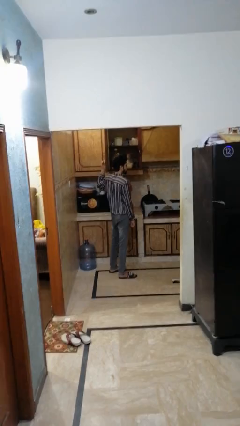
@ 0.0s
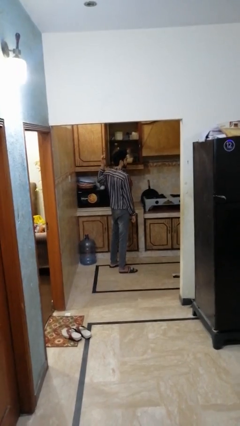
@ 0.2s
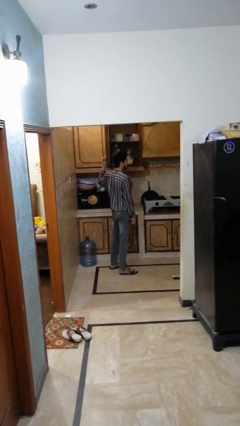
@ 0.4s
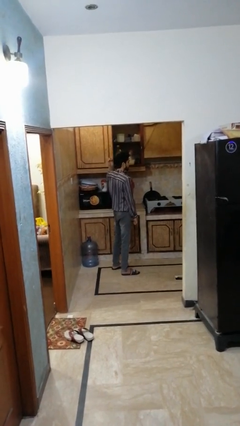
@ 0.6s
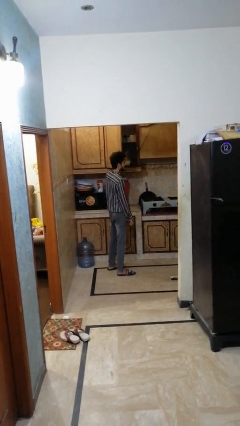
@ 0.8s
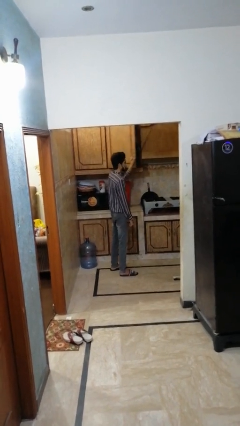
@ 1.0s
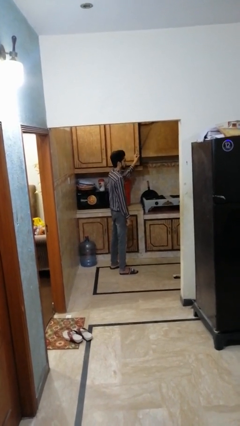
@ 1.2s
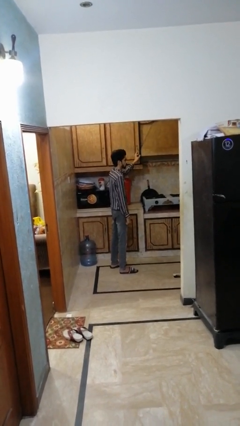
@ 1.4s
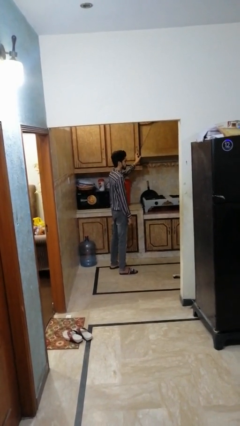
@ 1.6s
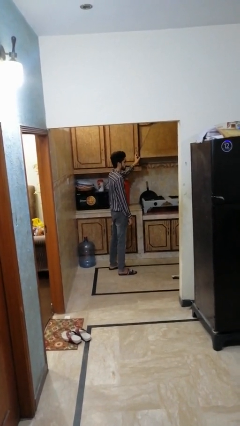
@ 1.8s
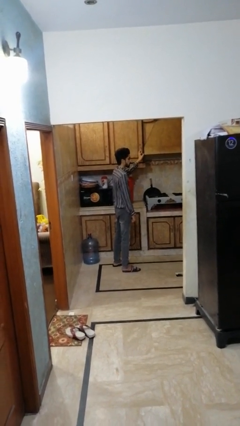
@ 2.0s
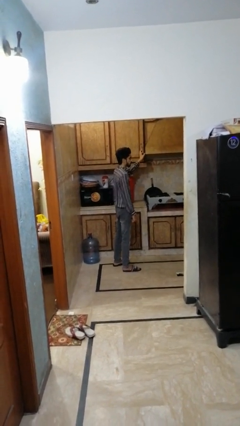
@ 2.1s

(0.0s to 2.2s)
person closes cabinet

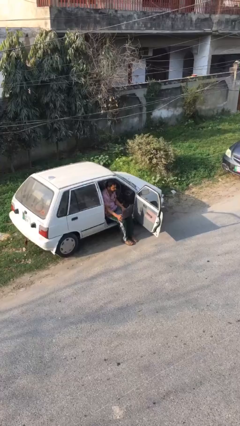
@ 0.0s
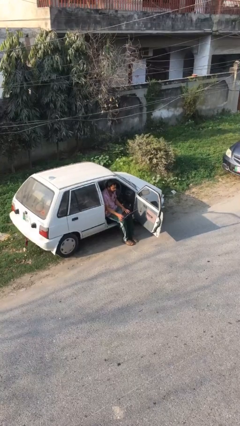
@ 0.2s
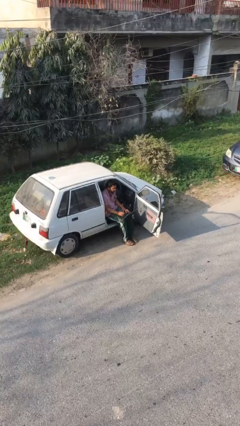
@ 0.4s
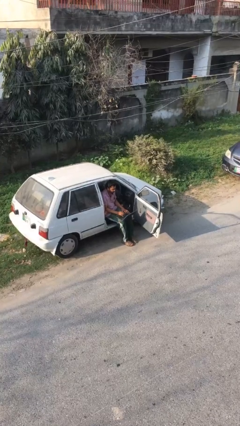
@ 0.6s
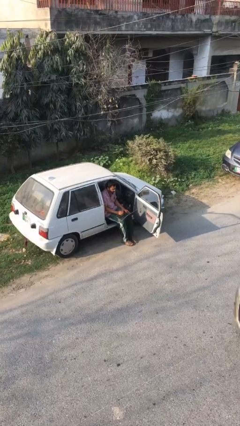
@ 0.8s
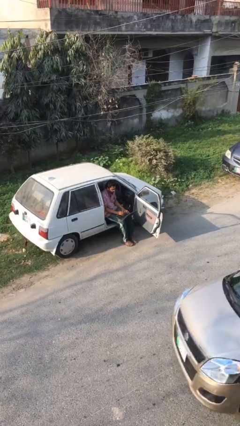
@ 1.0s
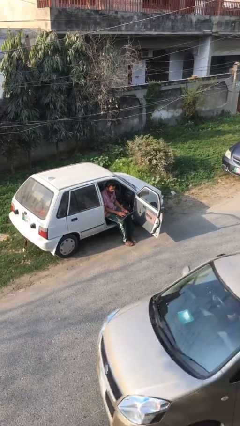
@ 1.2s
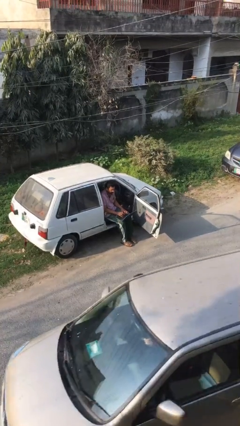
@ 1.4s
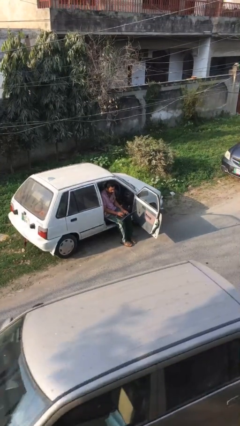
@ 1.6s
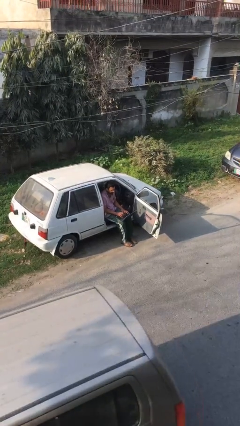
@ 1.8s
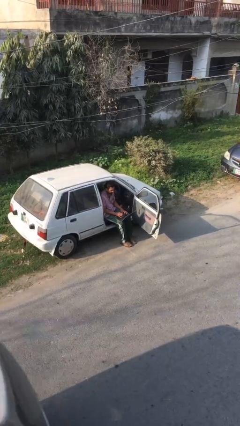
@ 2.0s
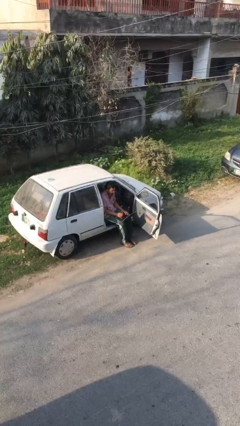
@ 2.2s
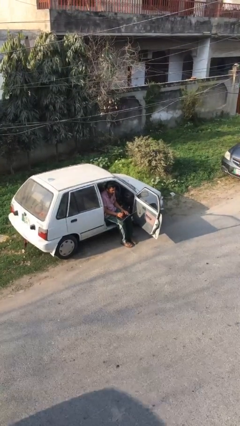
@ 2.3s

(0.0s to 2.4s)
person interacts with laptop

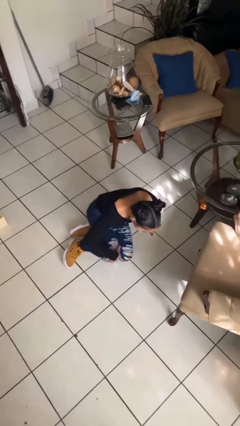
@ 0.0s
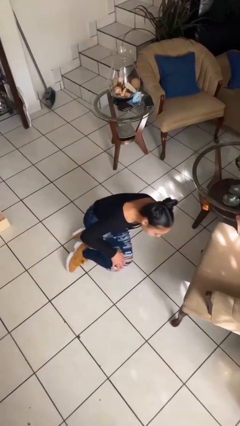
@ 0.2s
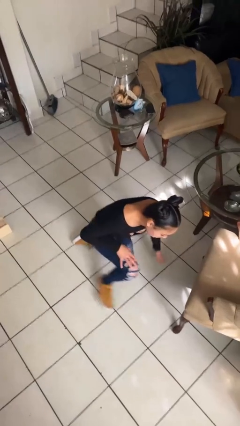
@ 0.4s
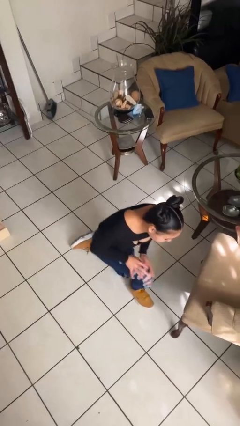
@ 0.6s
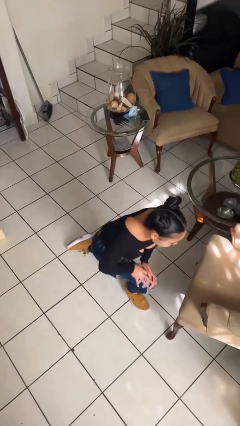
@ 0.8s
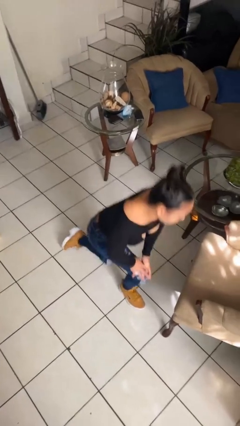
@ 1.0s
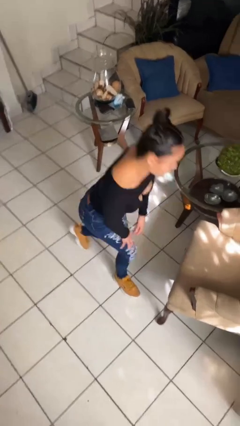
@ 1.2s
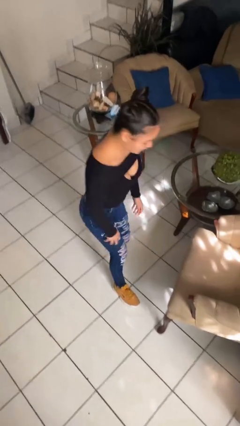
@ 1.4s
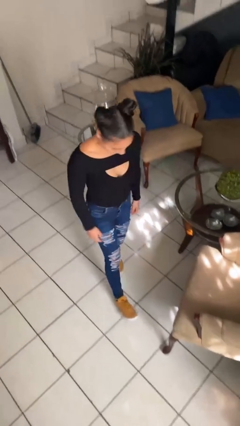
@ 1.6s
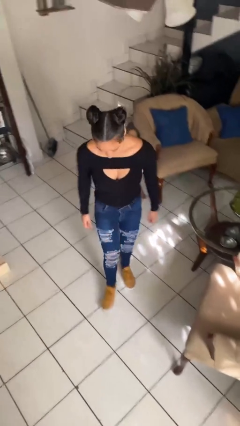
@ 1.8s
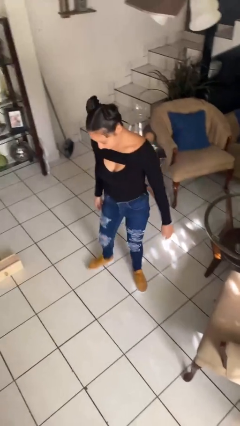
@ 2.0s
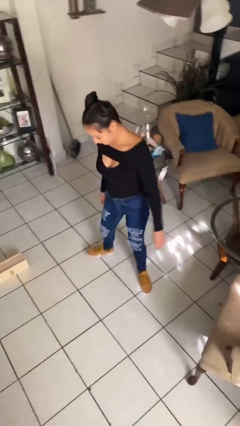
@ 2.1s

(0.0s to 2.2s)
person stands up from floor

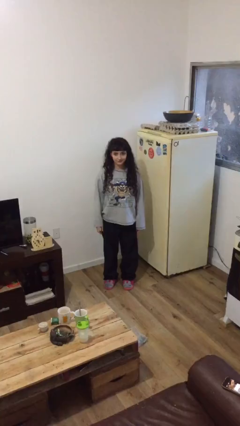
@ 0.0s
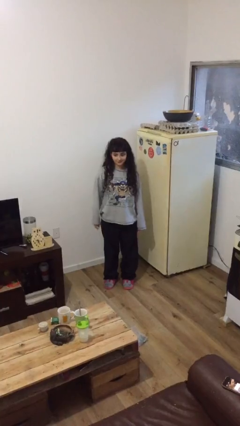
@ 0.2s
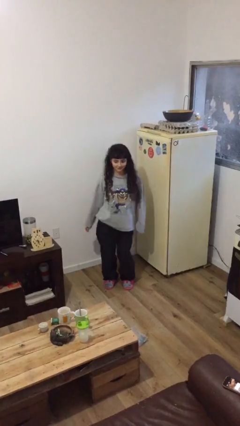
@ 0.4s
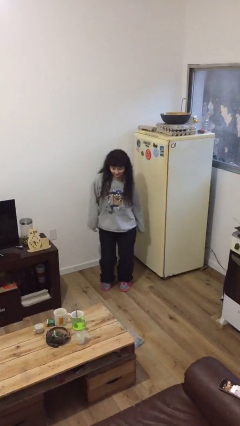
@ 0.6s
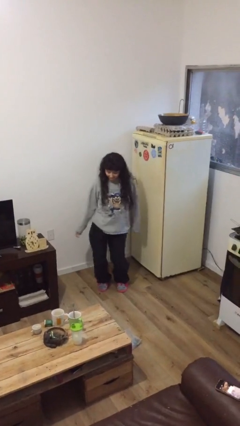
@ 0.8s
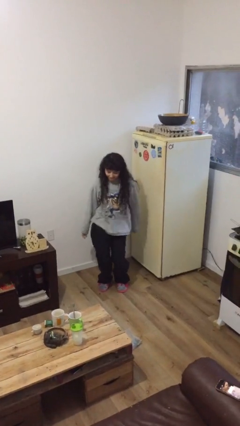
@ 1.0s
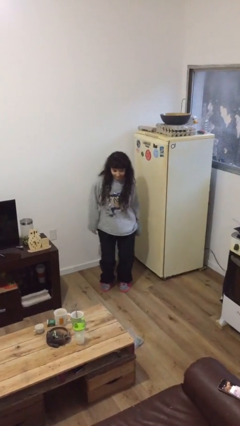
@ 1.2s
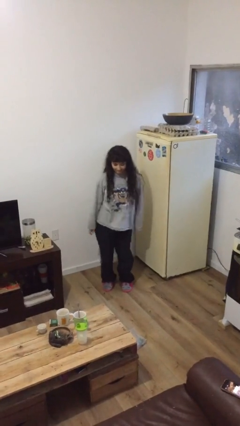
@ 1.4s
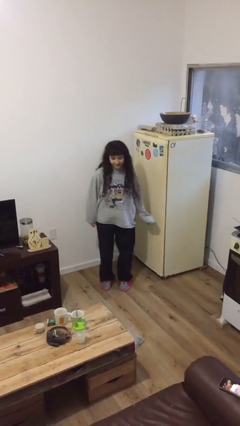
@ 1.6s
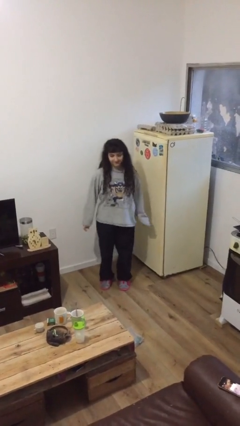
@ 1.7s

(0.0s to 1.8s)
person wiggles hips

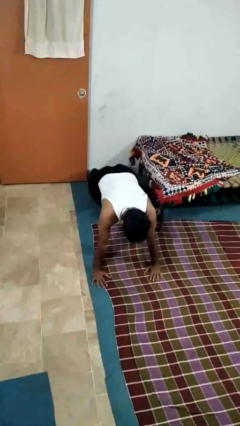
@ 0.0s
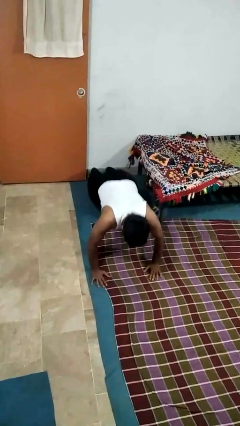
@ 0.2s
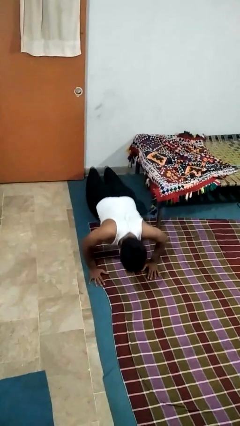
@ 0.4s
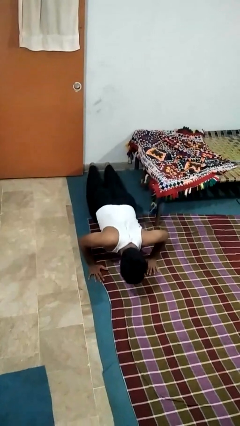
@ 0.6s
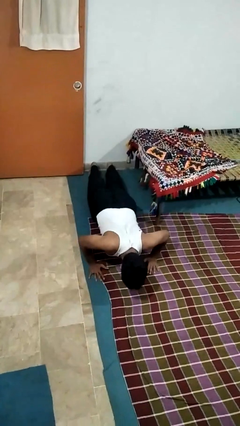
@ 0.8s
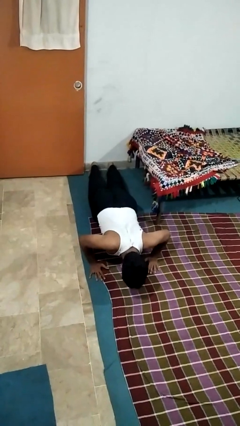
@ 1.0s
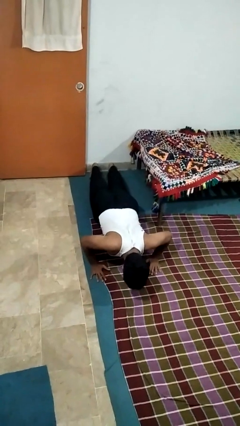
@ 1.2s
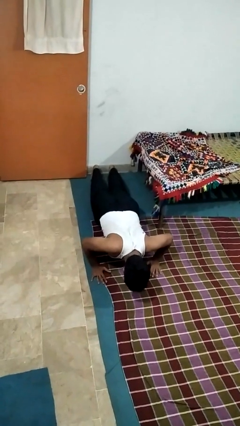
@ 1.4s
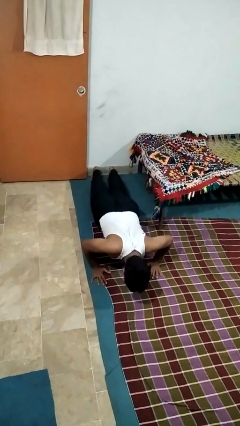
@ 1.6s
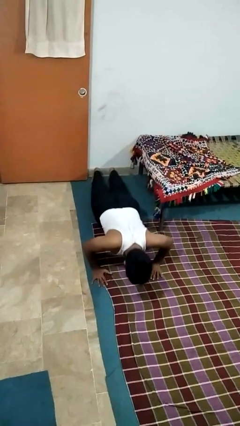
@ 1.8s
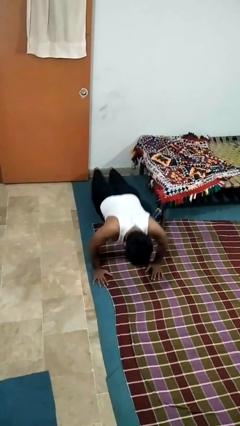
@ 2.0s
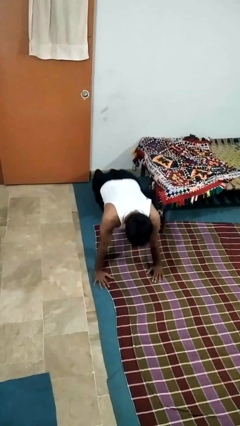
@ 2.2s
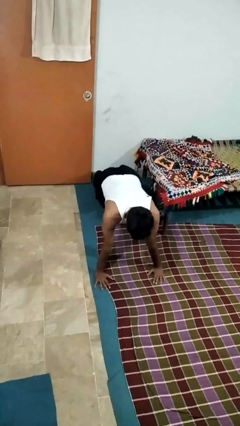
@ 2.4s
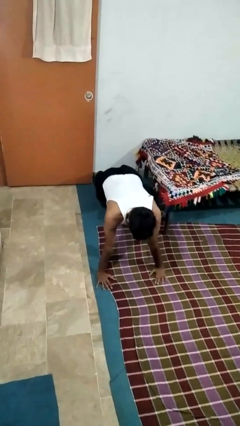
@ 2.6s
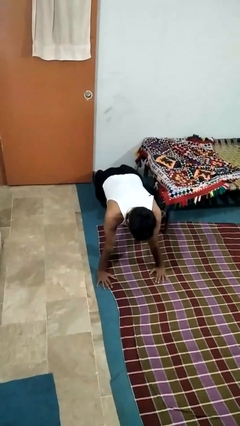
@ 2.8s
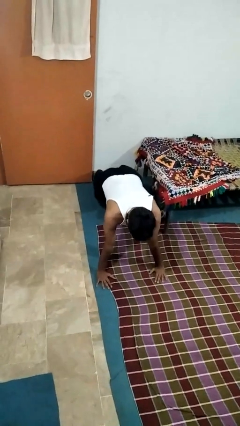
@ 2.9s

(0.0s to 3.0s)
person exercises with pushup

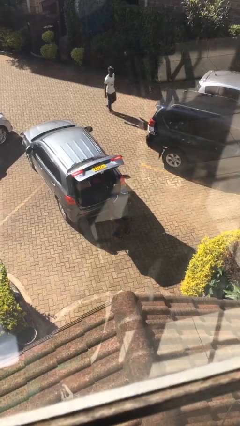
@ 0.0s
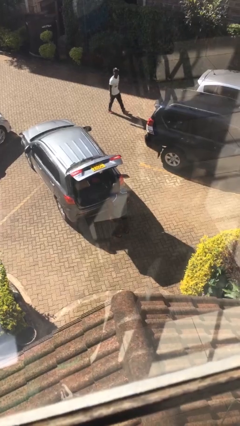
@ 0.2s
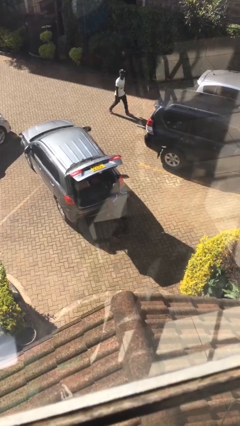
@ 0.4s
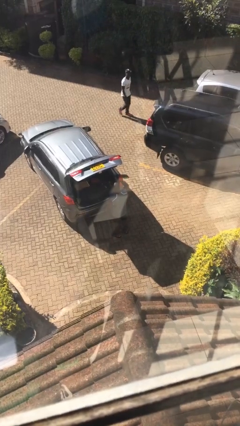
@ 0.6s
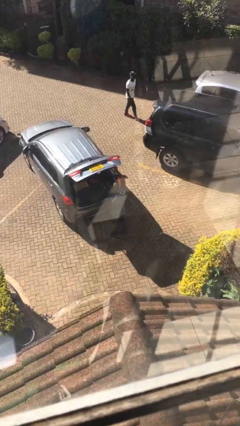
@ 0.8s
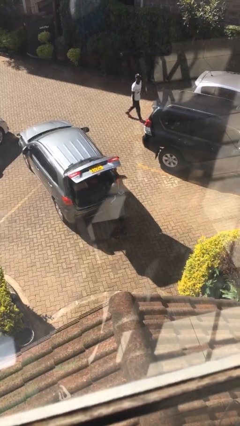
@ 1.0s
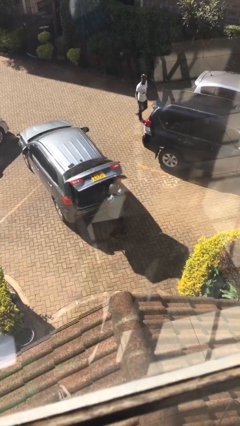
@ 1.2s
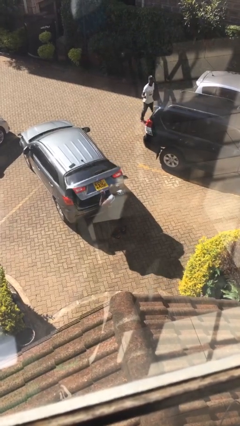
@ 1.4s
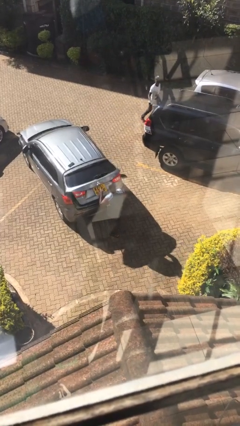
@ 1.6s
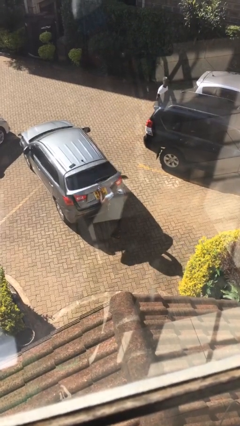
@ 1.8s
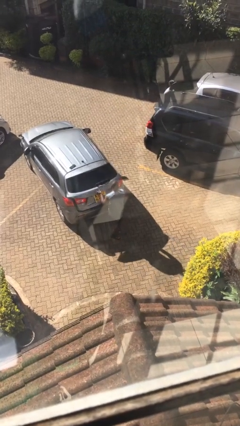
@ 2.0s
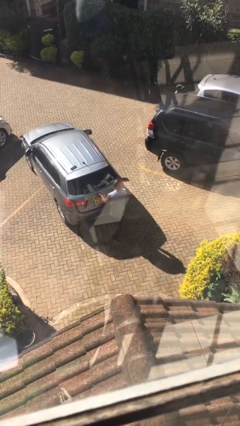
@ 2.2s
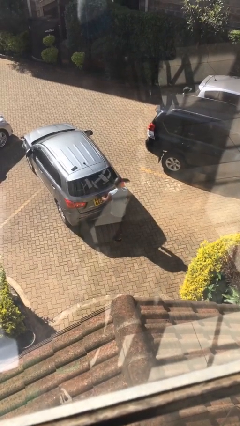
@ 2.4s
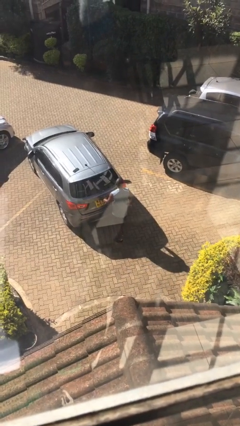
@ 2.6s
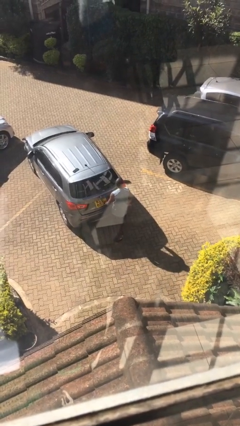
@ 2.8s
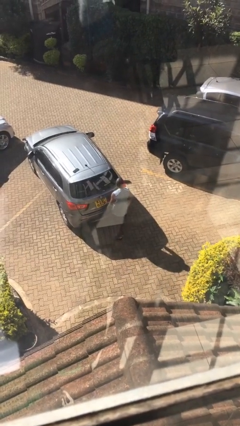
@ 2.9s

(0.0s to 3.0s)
person closes car trunk

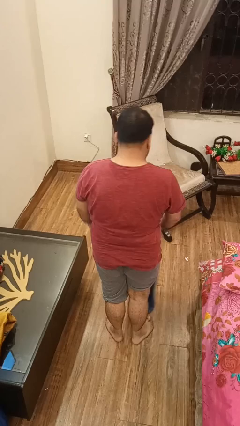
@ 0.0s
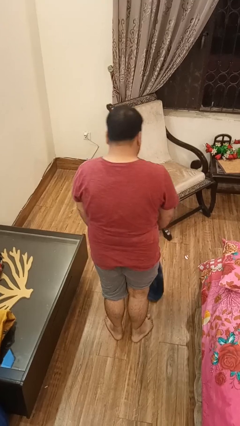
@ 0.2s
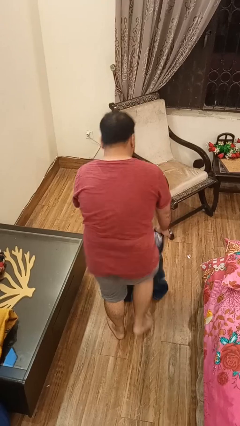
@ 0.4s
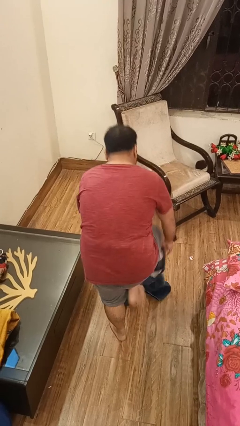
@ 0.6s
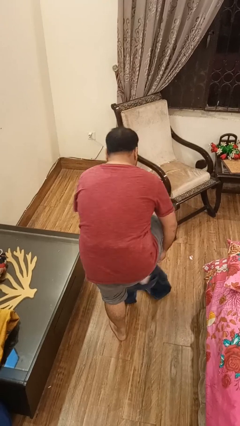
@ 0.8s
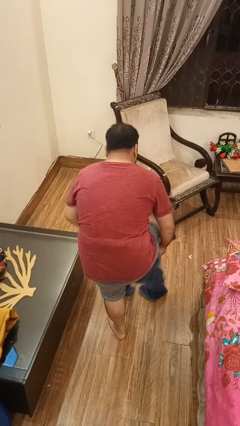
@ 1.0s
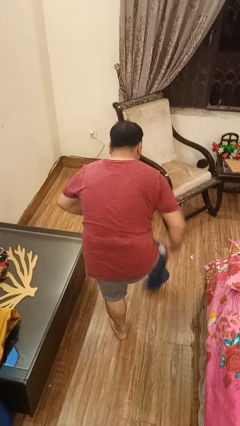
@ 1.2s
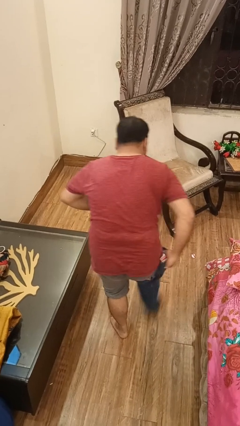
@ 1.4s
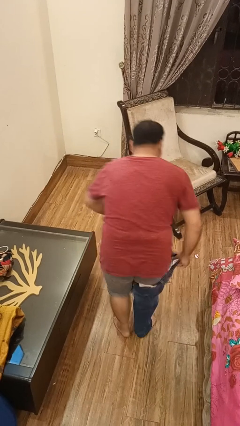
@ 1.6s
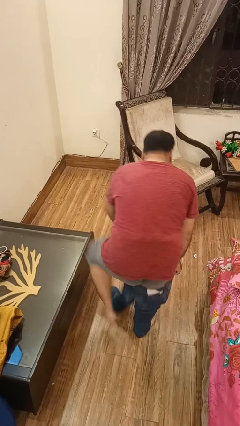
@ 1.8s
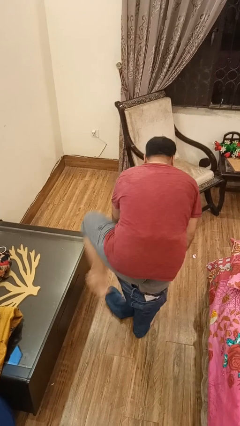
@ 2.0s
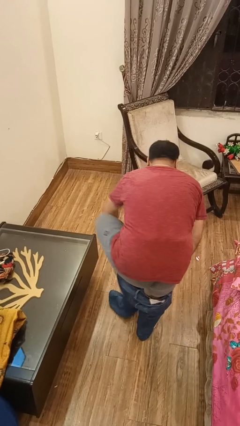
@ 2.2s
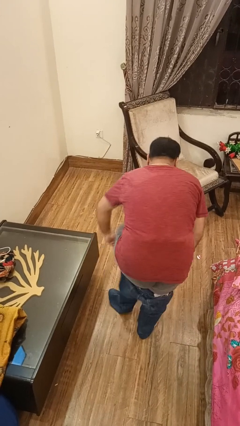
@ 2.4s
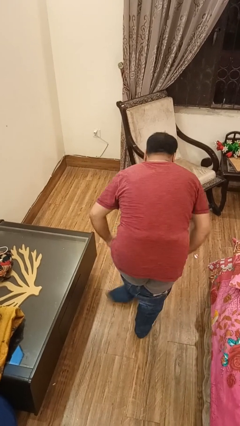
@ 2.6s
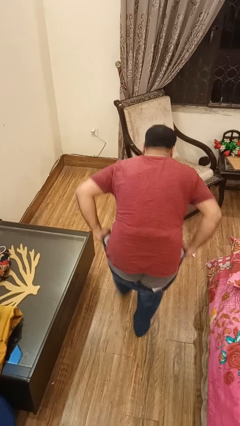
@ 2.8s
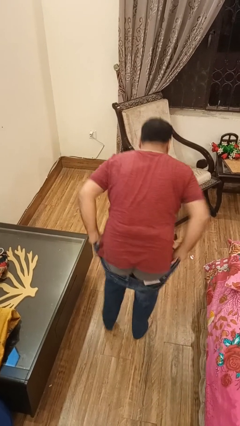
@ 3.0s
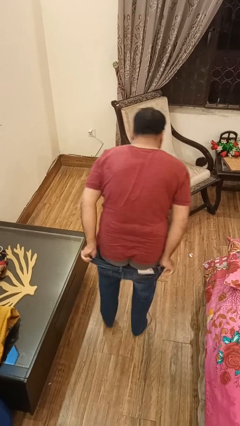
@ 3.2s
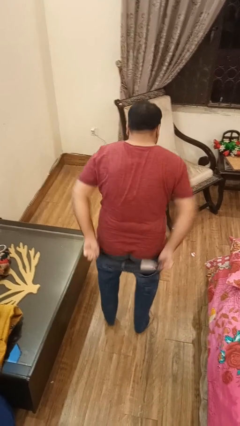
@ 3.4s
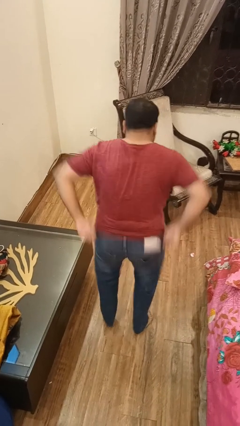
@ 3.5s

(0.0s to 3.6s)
person puts on pants
